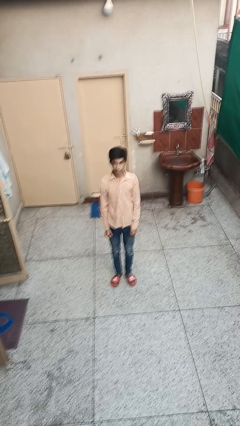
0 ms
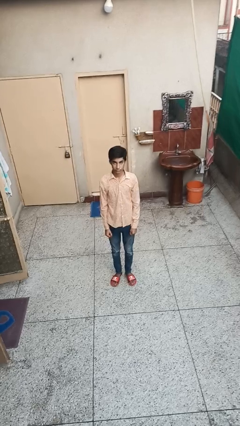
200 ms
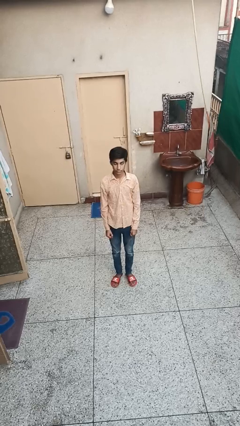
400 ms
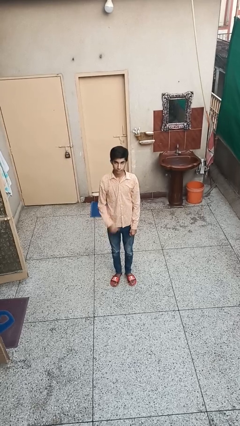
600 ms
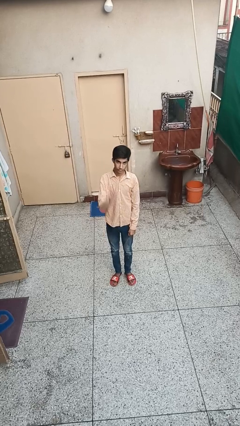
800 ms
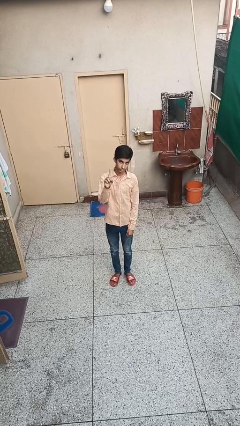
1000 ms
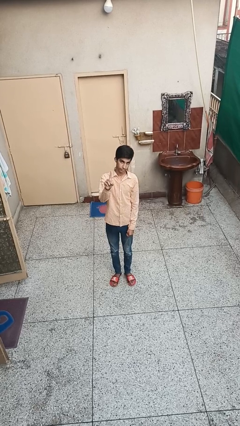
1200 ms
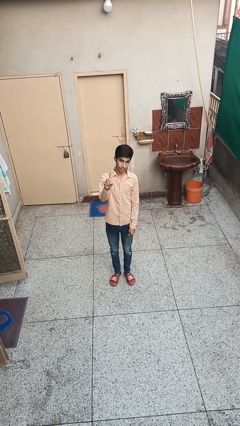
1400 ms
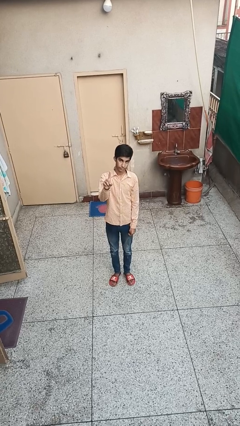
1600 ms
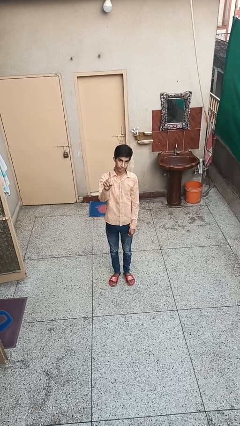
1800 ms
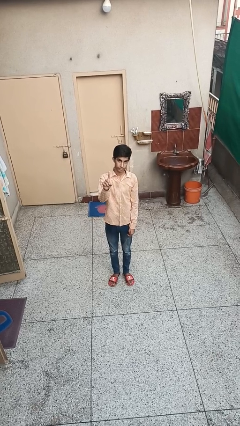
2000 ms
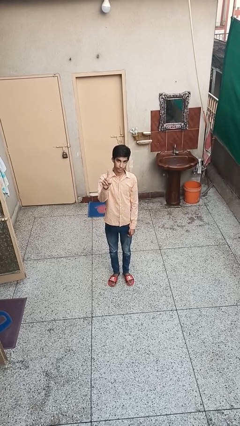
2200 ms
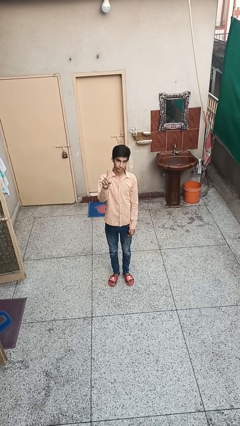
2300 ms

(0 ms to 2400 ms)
person gestures number one

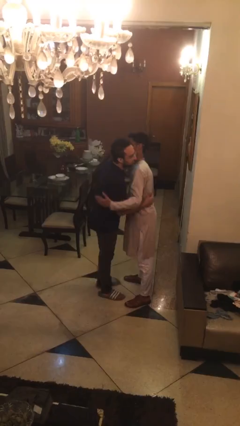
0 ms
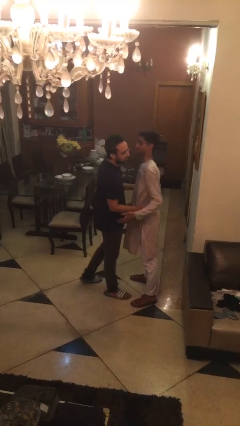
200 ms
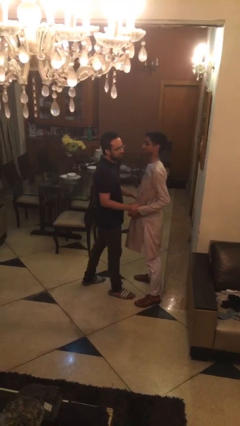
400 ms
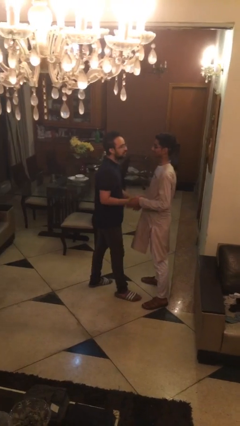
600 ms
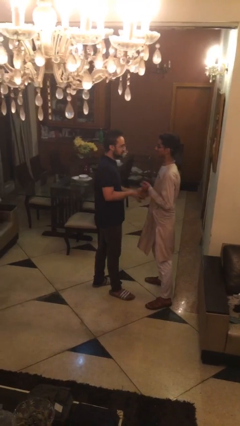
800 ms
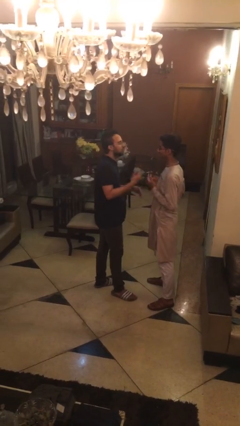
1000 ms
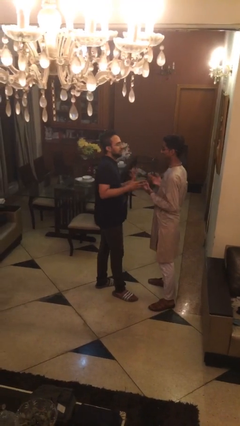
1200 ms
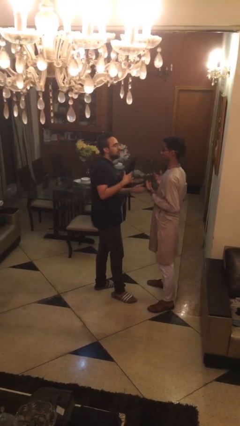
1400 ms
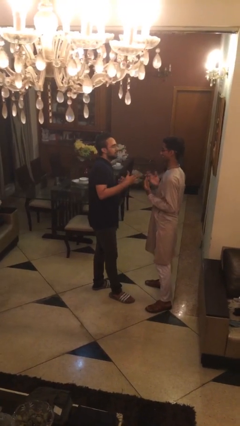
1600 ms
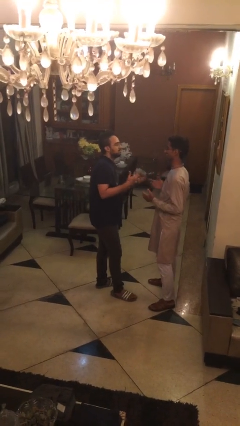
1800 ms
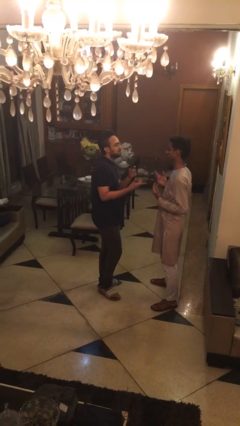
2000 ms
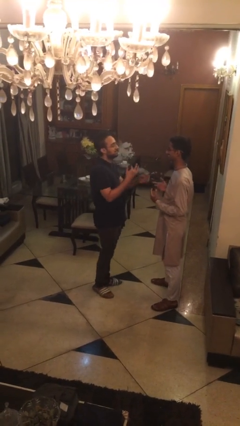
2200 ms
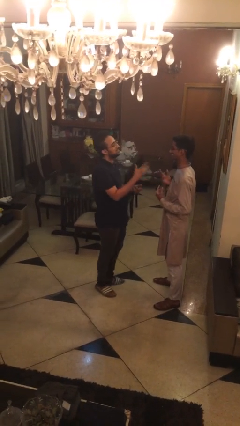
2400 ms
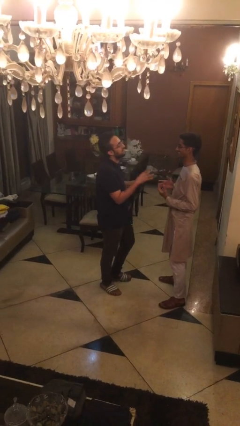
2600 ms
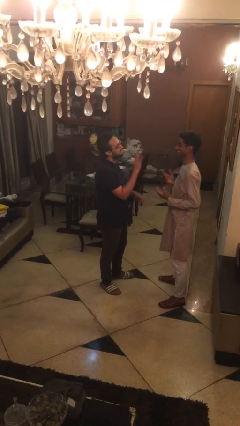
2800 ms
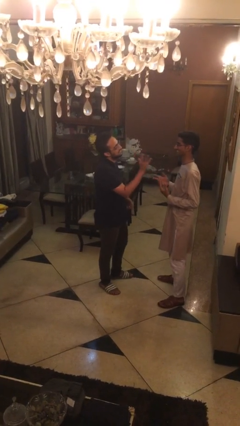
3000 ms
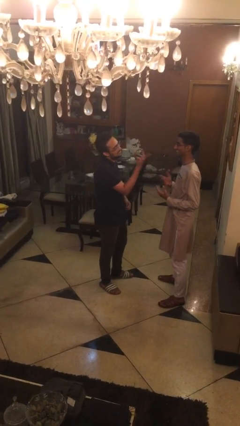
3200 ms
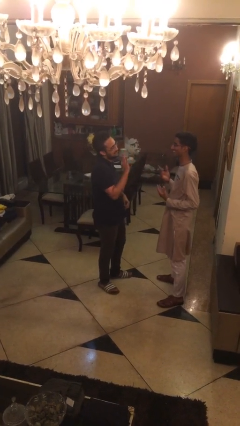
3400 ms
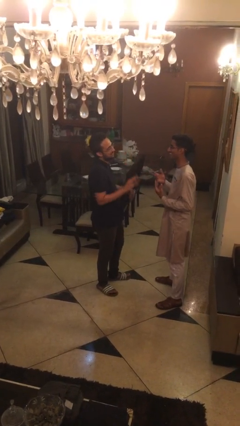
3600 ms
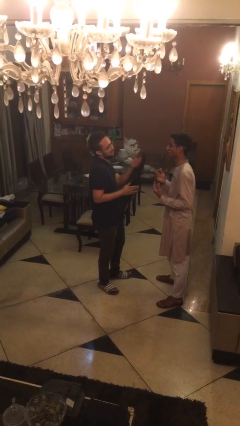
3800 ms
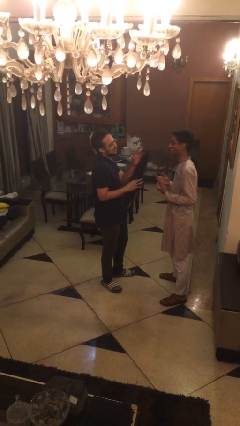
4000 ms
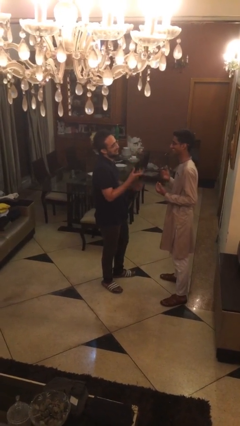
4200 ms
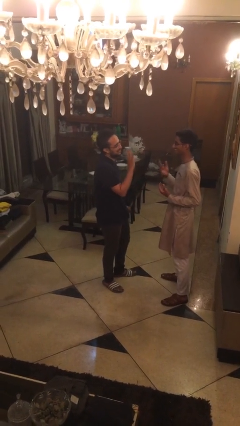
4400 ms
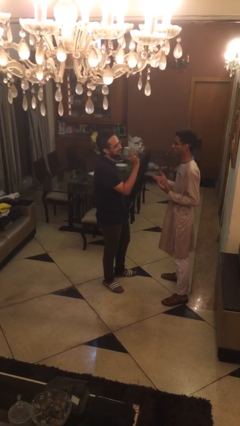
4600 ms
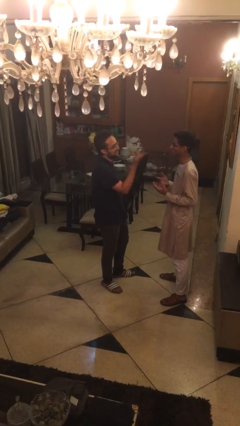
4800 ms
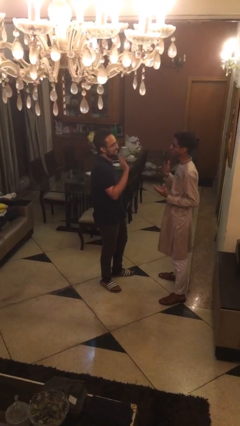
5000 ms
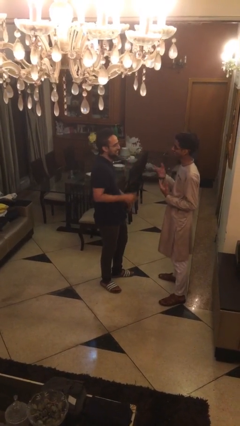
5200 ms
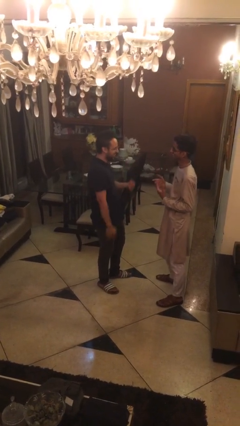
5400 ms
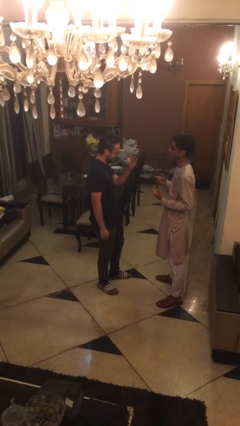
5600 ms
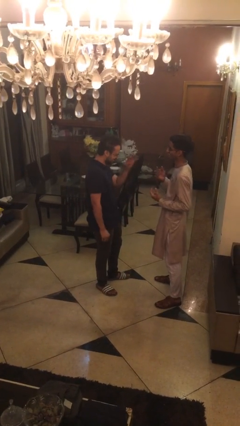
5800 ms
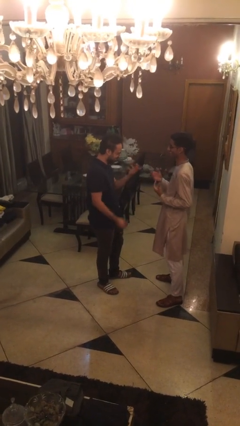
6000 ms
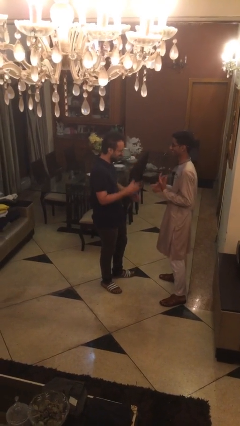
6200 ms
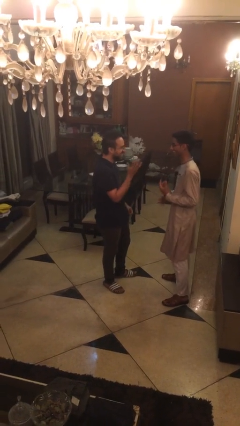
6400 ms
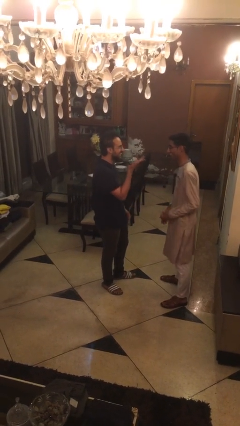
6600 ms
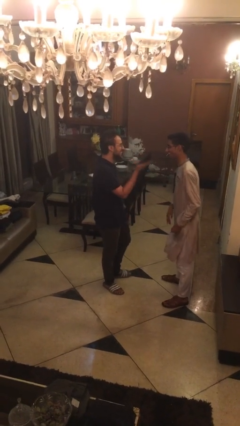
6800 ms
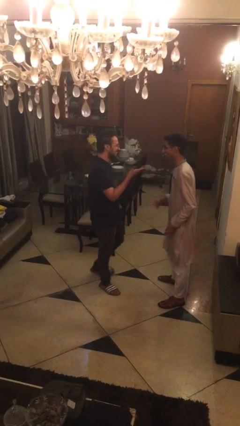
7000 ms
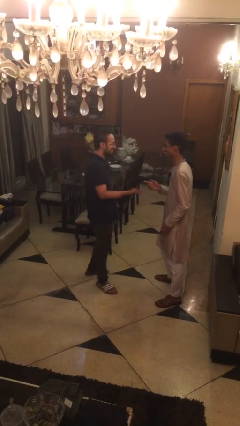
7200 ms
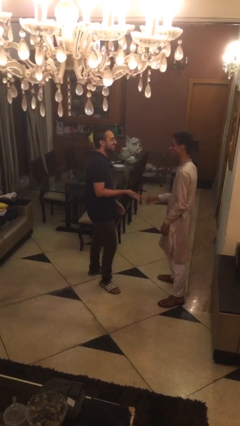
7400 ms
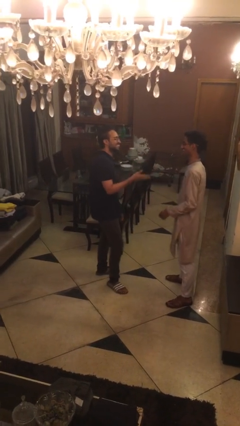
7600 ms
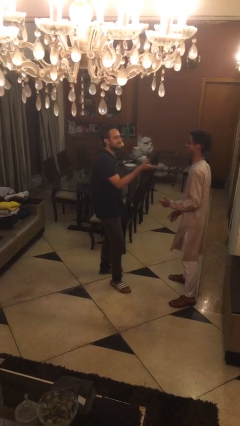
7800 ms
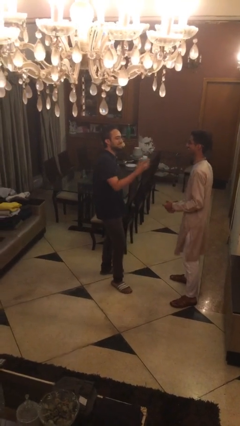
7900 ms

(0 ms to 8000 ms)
person talks to person

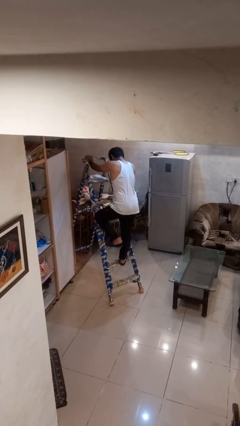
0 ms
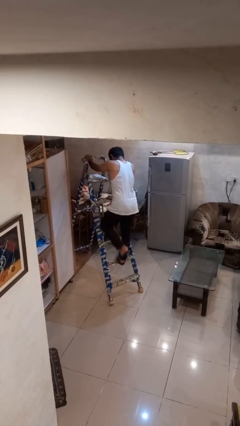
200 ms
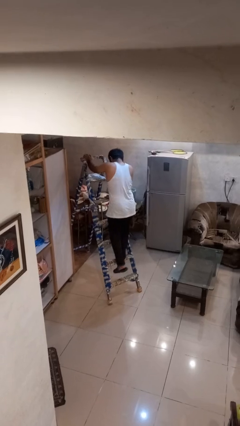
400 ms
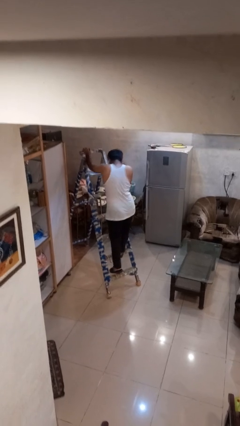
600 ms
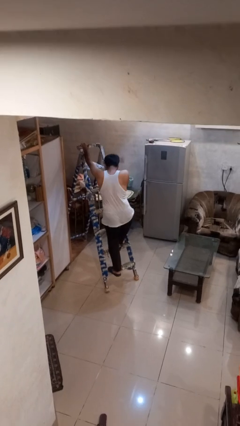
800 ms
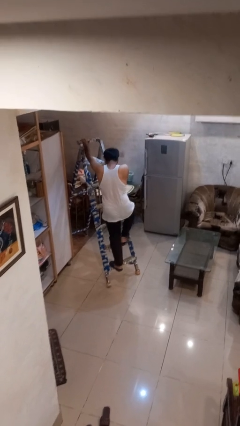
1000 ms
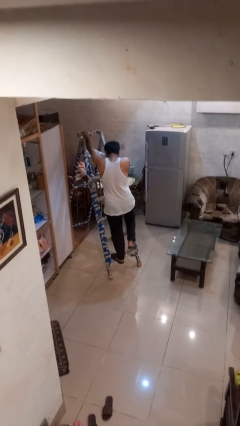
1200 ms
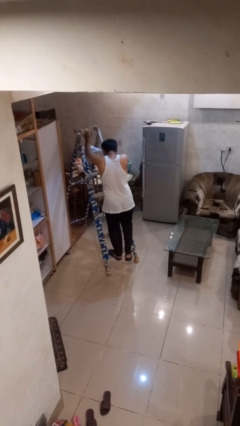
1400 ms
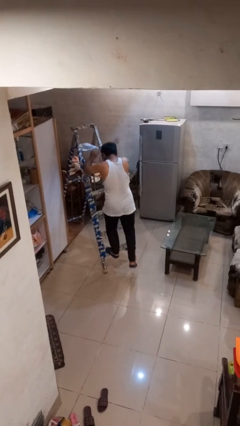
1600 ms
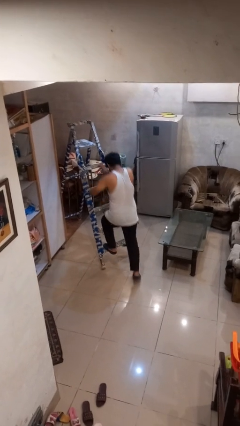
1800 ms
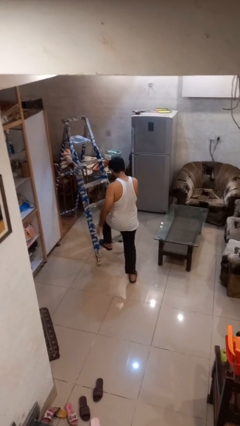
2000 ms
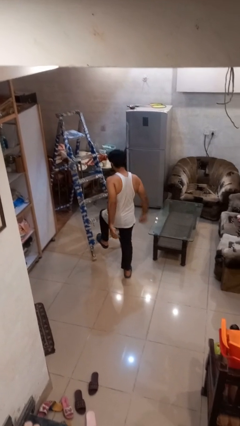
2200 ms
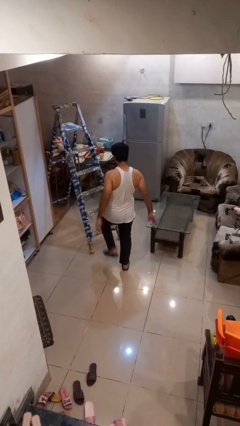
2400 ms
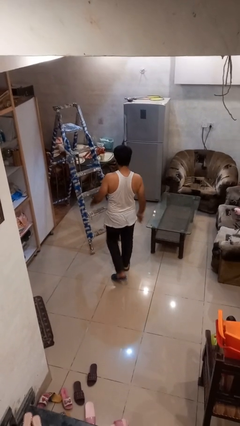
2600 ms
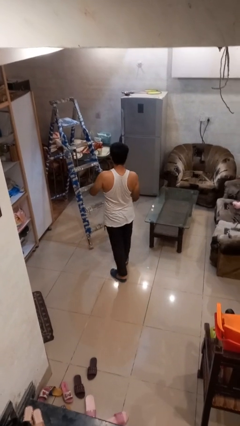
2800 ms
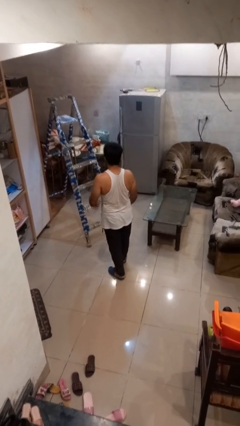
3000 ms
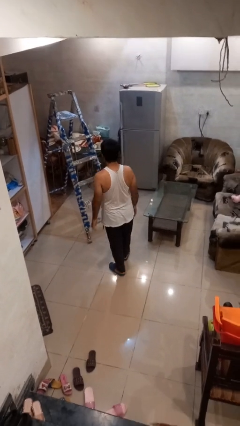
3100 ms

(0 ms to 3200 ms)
person climbs down ladder

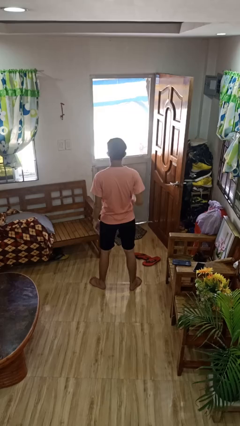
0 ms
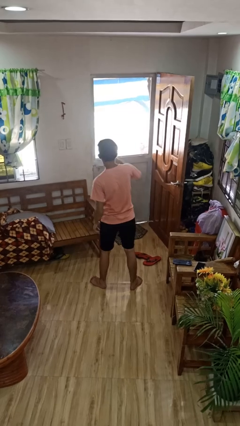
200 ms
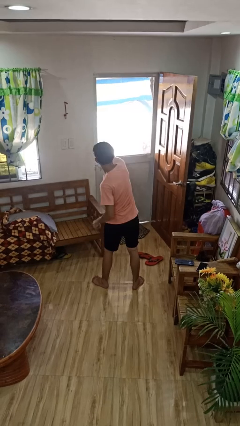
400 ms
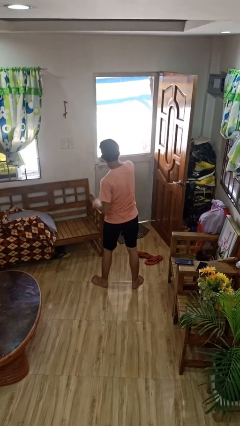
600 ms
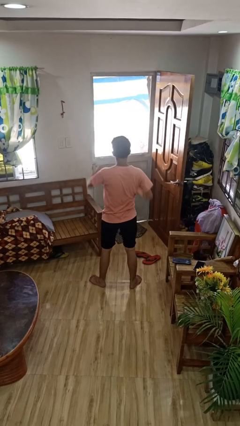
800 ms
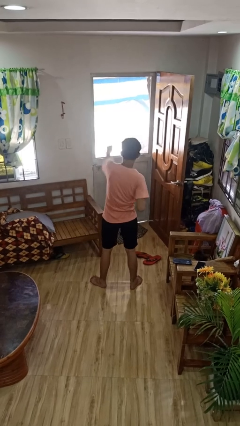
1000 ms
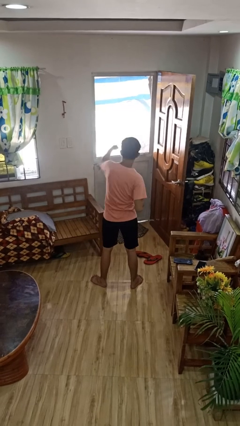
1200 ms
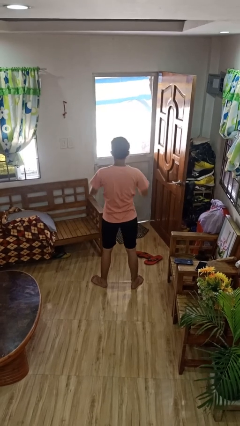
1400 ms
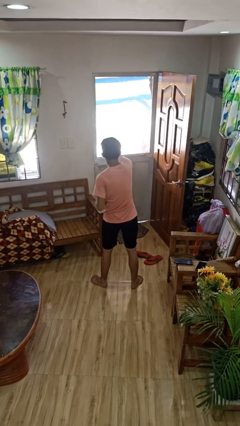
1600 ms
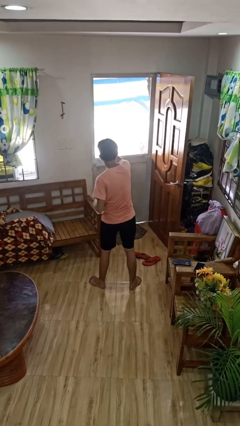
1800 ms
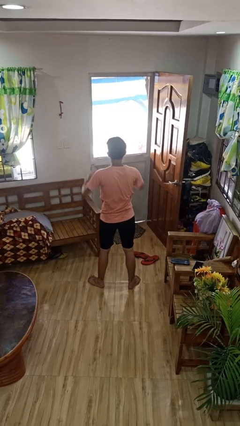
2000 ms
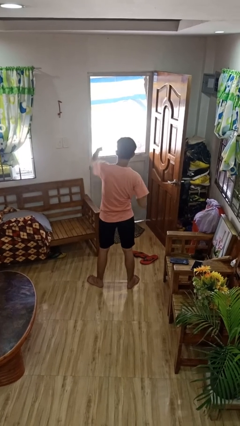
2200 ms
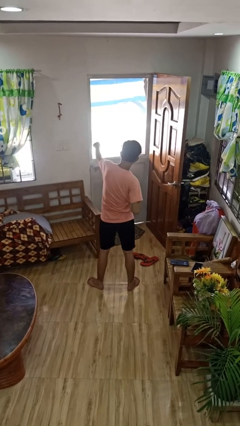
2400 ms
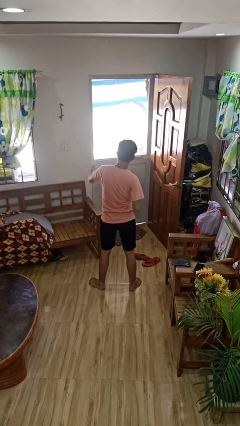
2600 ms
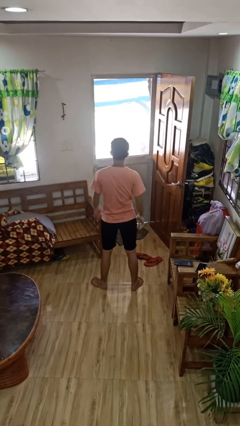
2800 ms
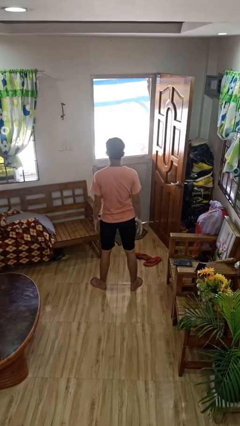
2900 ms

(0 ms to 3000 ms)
person punches

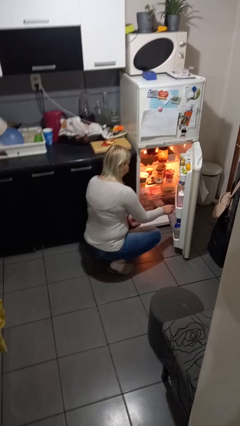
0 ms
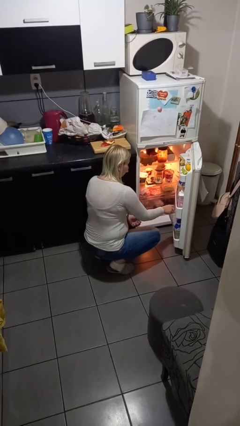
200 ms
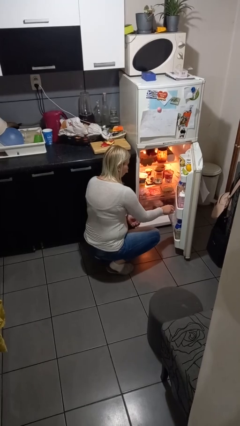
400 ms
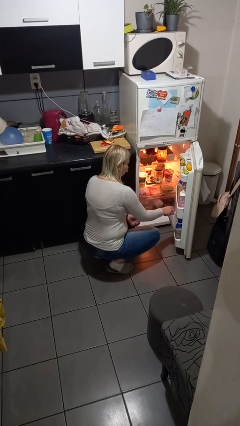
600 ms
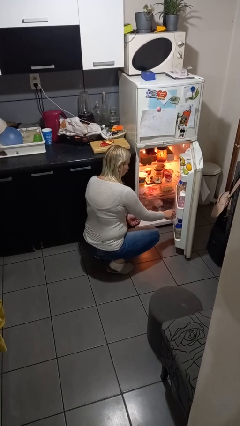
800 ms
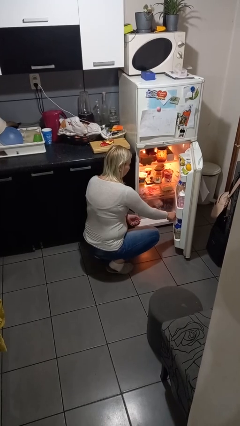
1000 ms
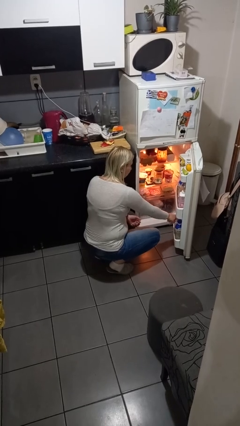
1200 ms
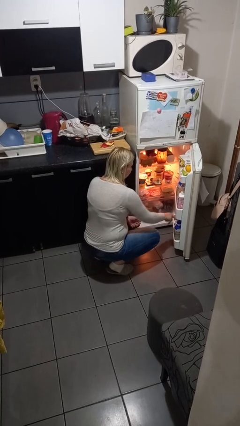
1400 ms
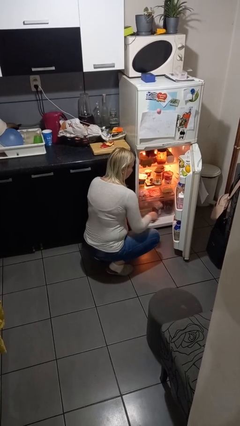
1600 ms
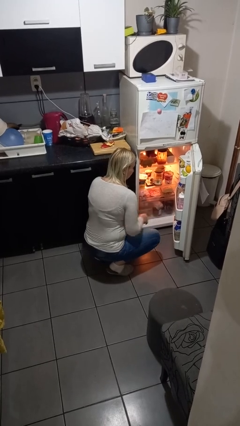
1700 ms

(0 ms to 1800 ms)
person puts object into refrigerator
